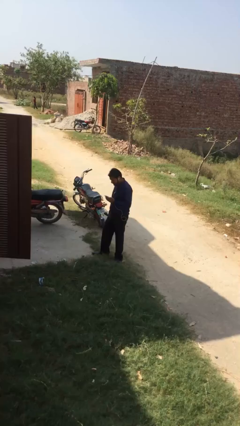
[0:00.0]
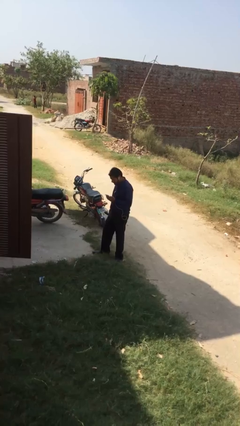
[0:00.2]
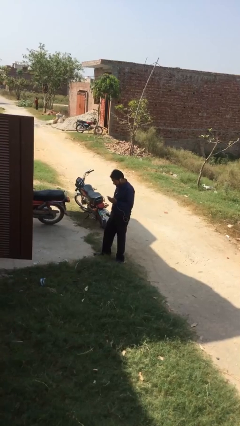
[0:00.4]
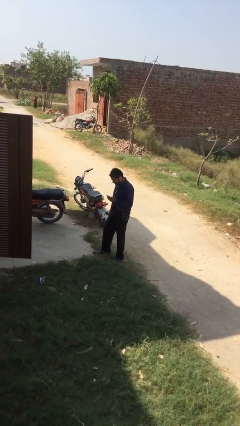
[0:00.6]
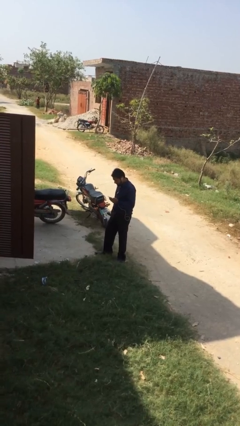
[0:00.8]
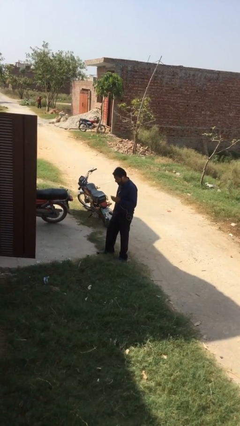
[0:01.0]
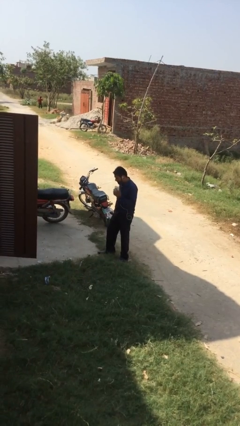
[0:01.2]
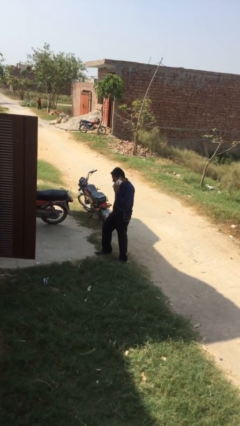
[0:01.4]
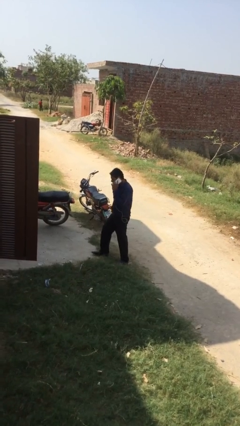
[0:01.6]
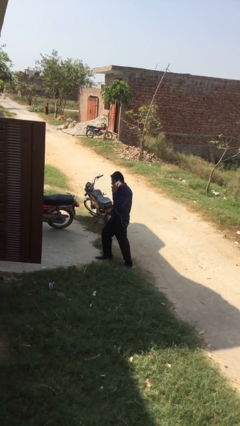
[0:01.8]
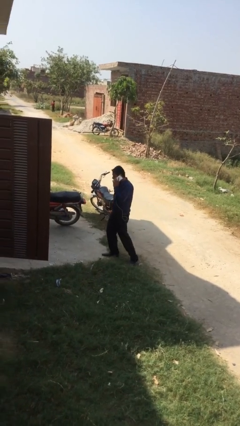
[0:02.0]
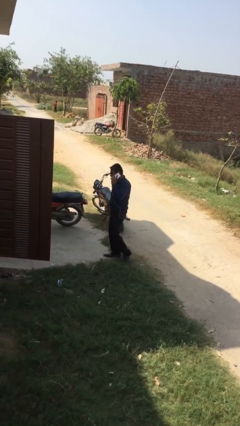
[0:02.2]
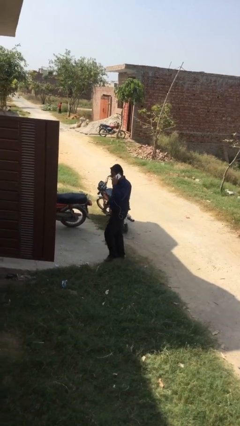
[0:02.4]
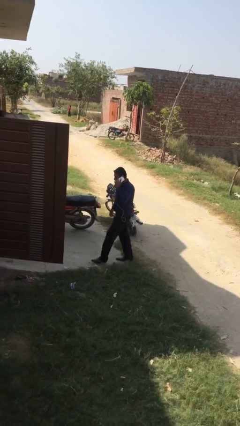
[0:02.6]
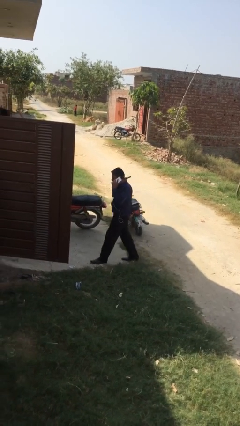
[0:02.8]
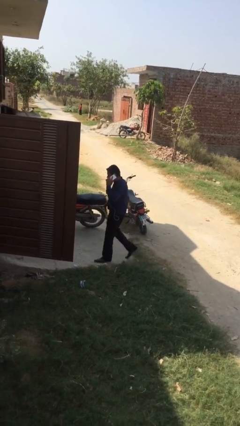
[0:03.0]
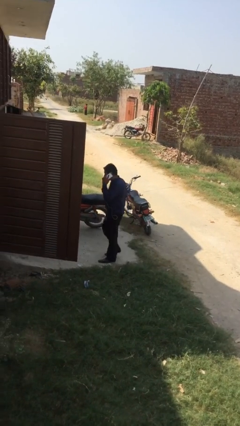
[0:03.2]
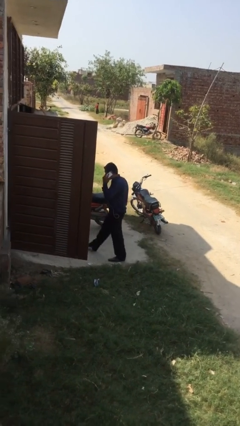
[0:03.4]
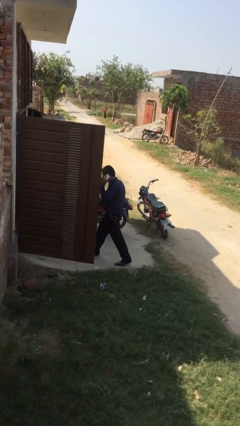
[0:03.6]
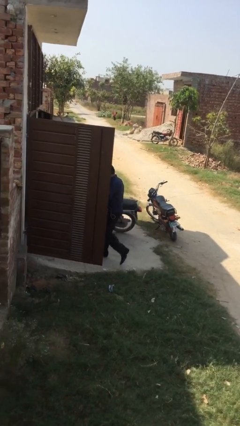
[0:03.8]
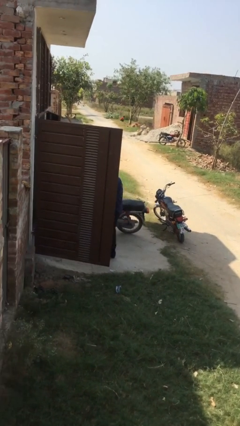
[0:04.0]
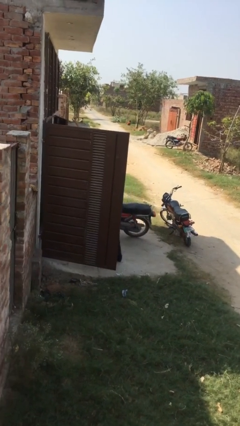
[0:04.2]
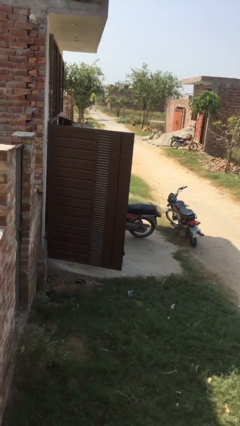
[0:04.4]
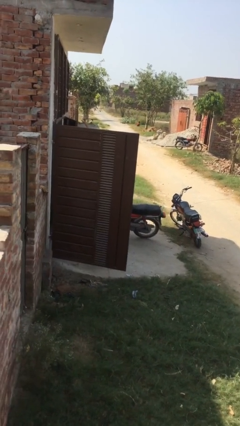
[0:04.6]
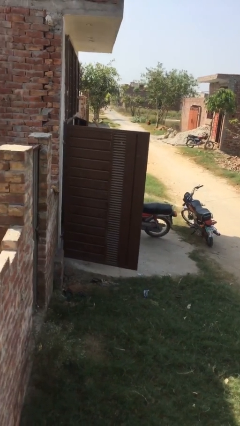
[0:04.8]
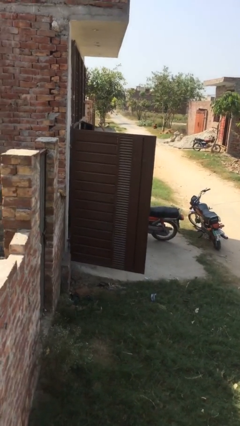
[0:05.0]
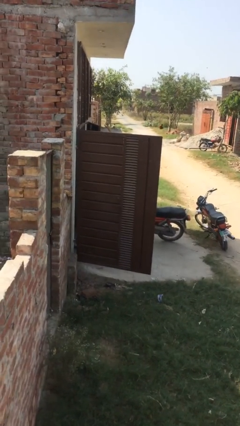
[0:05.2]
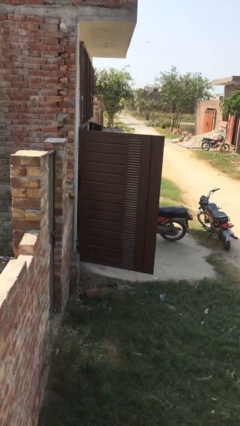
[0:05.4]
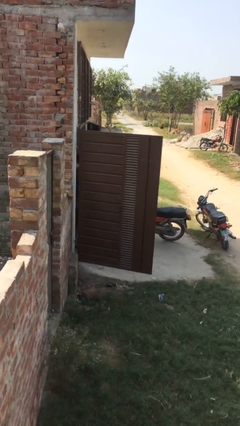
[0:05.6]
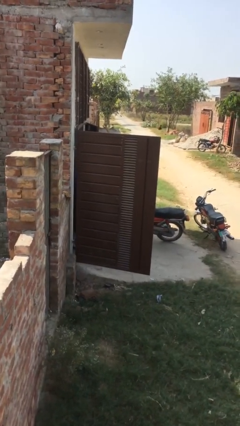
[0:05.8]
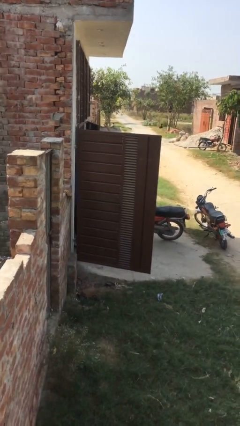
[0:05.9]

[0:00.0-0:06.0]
person exits scene through structure

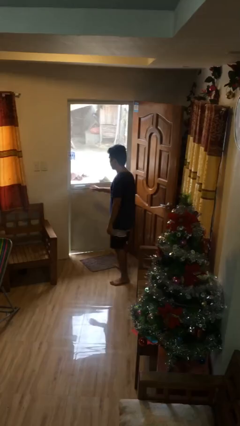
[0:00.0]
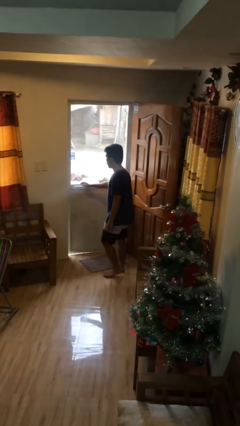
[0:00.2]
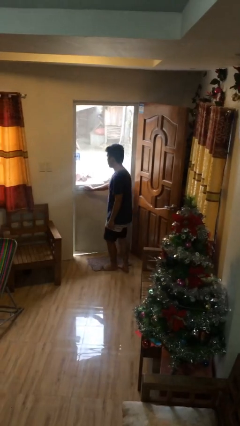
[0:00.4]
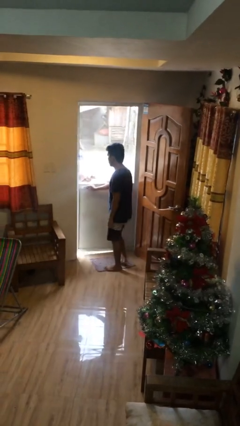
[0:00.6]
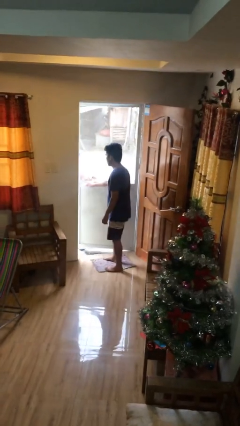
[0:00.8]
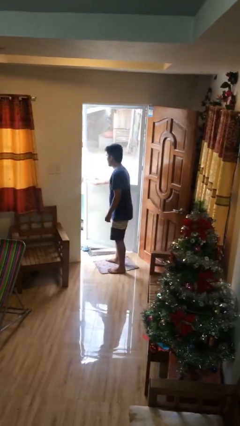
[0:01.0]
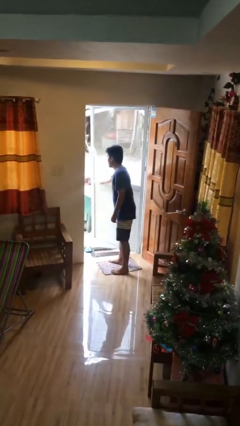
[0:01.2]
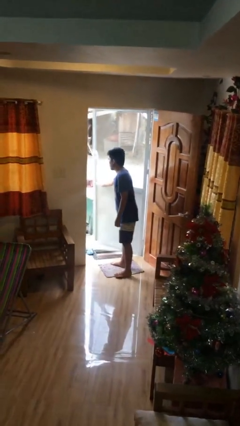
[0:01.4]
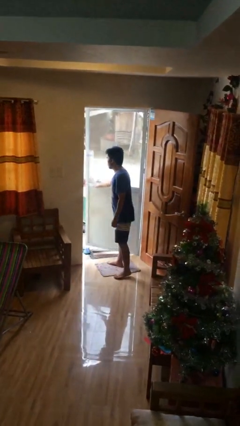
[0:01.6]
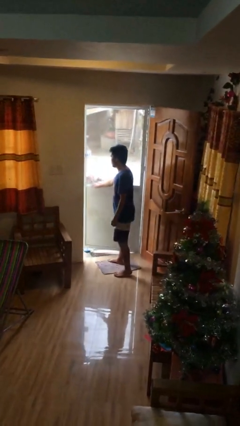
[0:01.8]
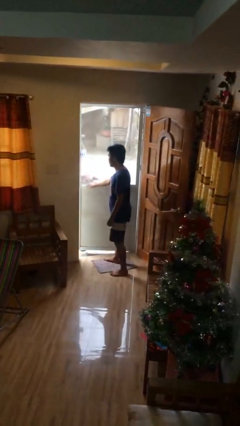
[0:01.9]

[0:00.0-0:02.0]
person opens facility door

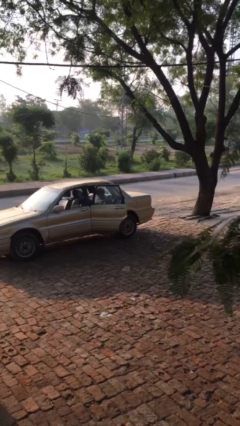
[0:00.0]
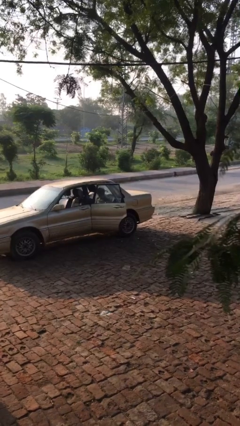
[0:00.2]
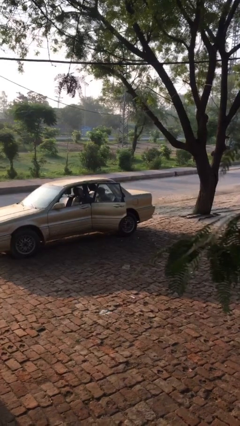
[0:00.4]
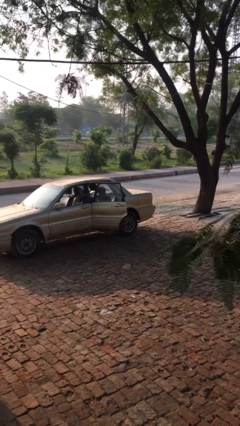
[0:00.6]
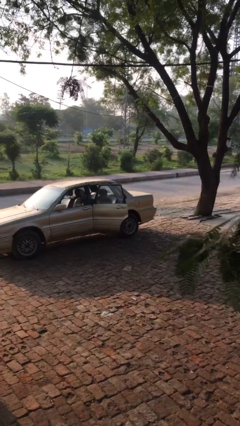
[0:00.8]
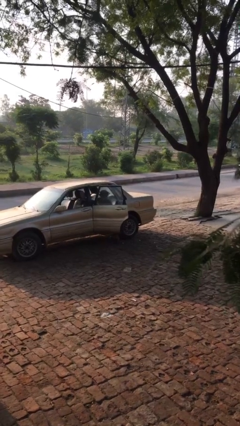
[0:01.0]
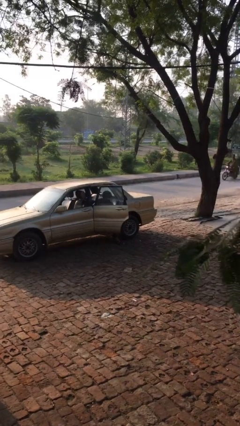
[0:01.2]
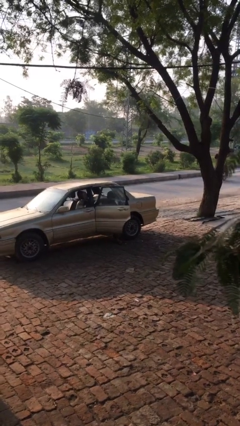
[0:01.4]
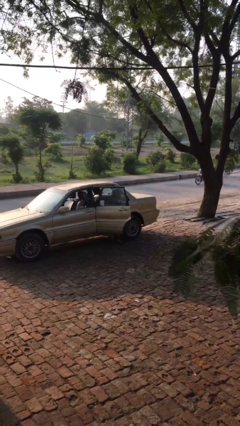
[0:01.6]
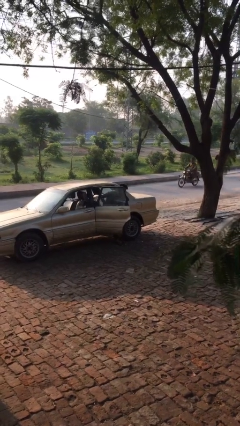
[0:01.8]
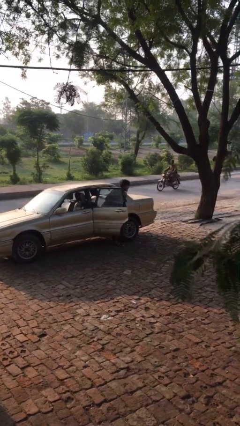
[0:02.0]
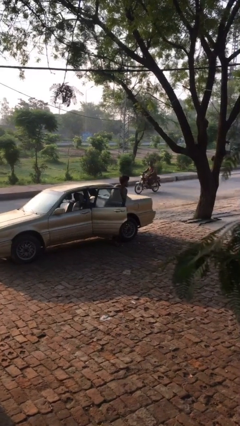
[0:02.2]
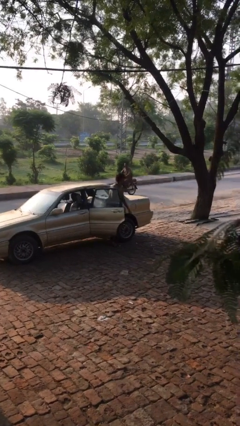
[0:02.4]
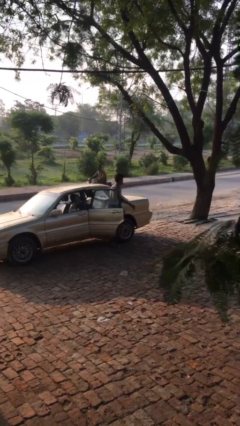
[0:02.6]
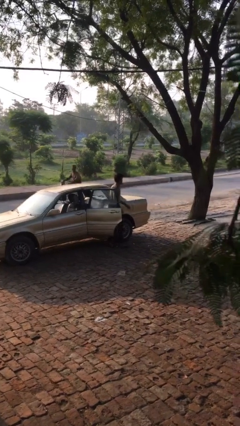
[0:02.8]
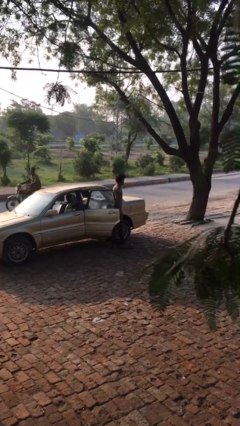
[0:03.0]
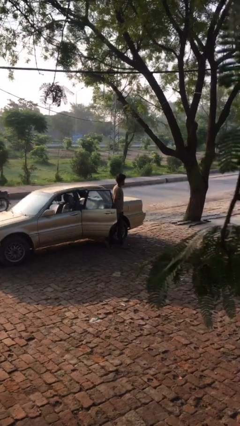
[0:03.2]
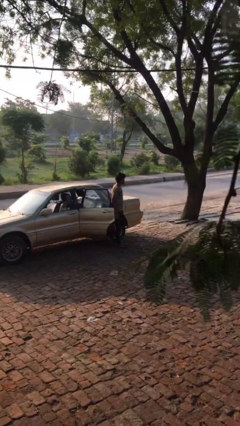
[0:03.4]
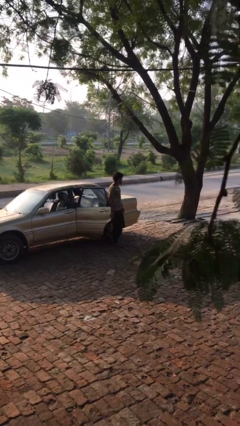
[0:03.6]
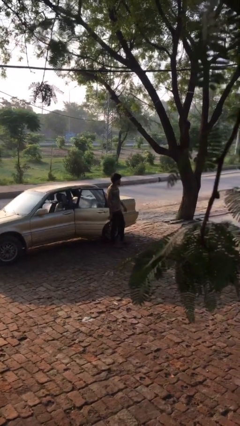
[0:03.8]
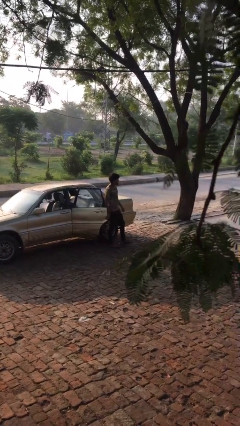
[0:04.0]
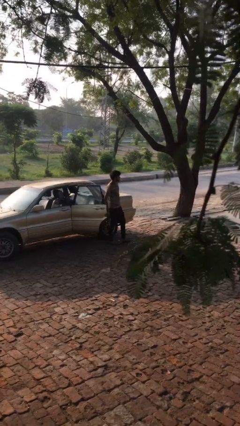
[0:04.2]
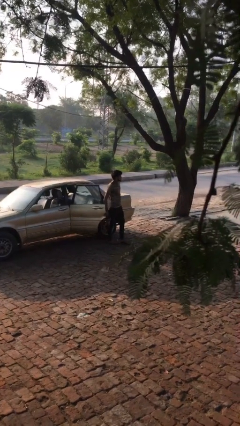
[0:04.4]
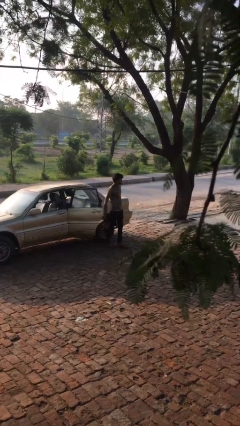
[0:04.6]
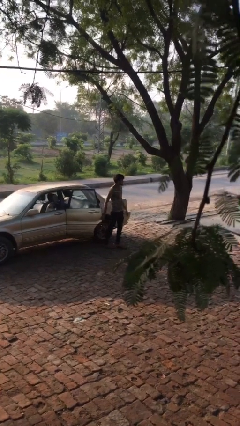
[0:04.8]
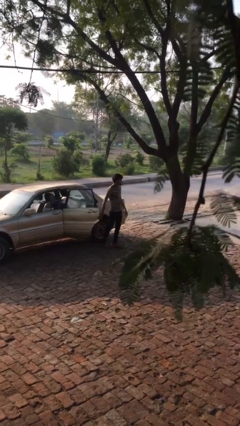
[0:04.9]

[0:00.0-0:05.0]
person exits car

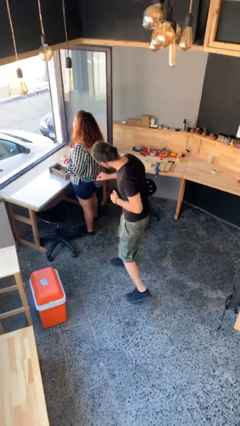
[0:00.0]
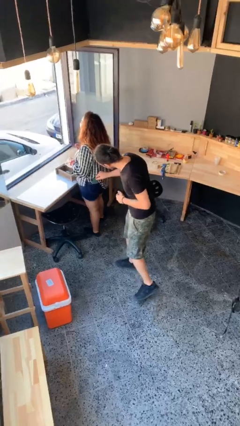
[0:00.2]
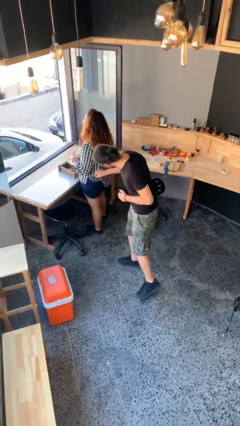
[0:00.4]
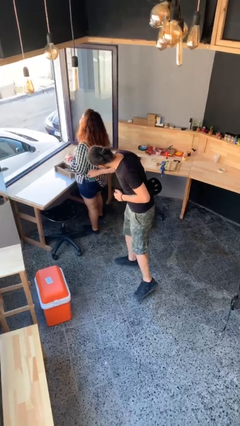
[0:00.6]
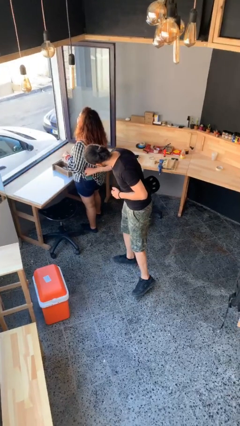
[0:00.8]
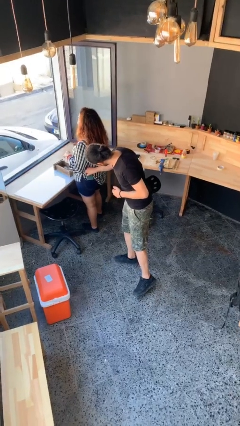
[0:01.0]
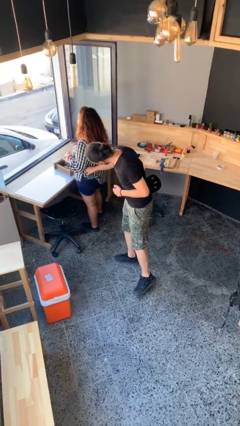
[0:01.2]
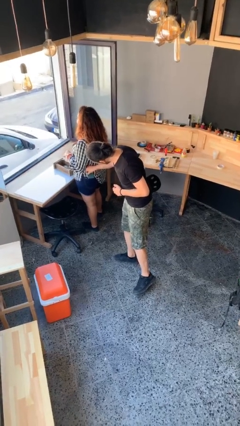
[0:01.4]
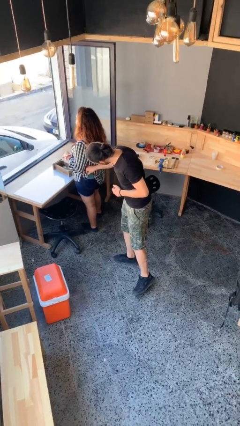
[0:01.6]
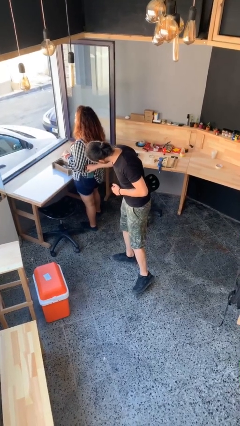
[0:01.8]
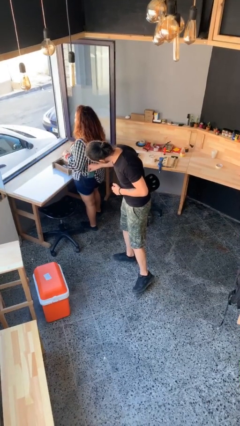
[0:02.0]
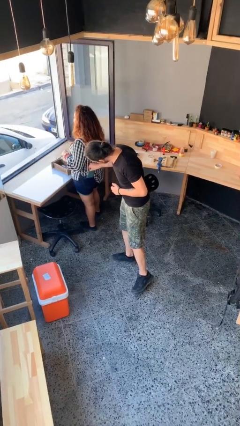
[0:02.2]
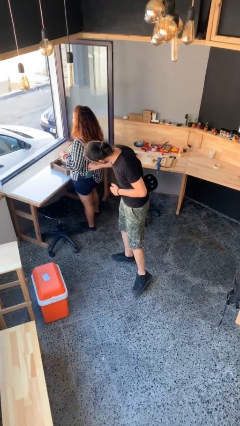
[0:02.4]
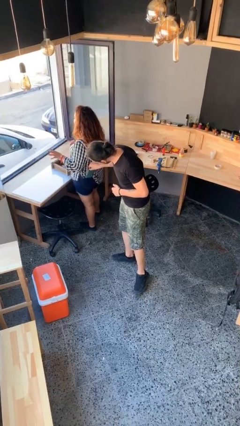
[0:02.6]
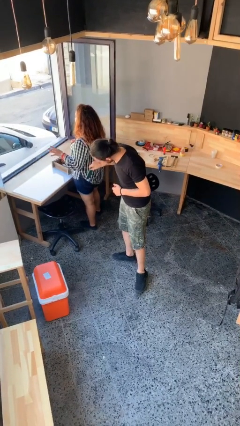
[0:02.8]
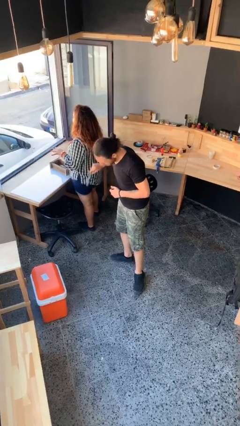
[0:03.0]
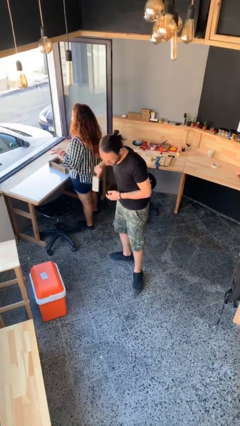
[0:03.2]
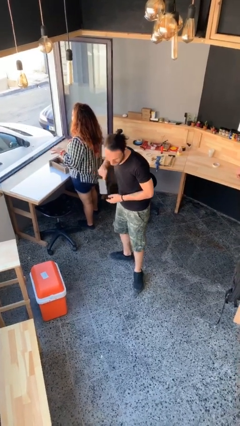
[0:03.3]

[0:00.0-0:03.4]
person steals object from person

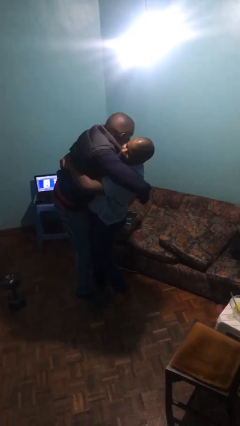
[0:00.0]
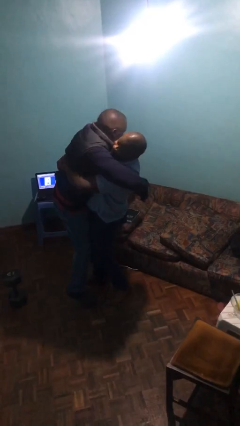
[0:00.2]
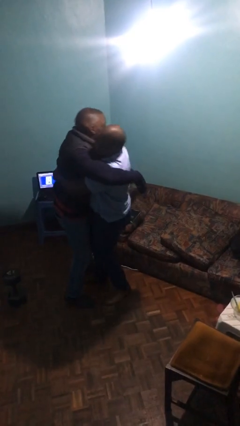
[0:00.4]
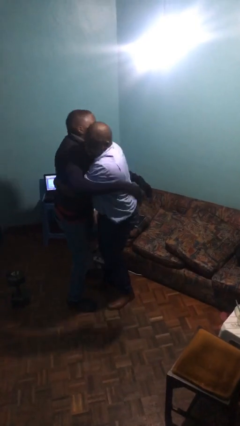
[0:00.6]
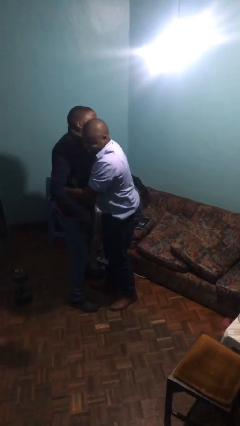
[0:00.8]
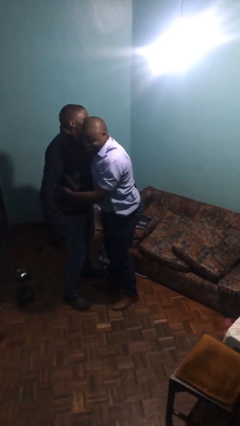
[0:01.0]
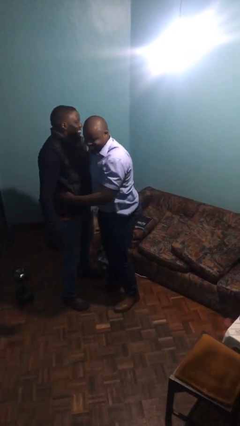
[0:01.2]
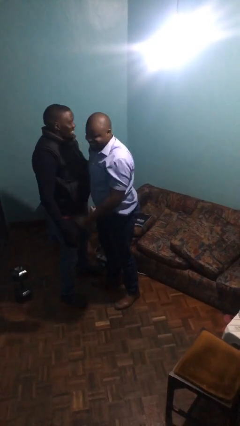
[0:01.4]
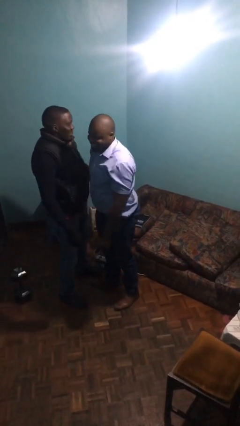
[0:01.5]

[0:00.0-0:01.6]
person puts down person
